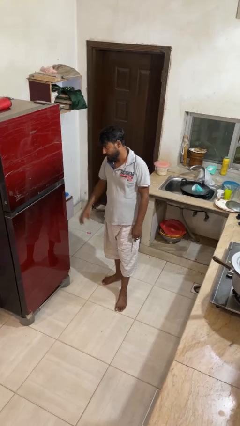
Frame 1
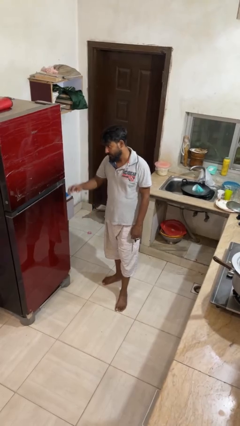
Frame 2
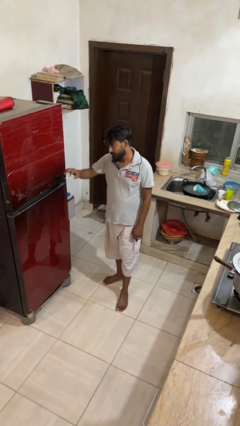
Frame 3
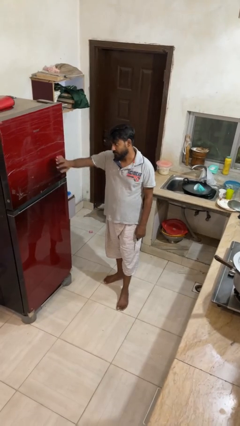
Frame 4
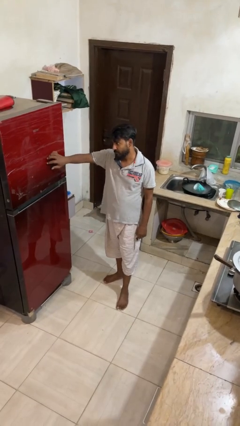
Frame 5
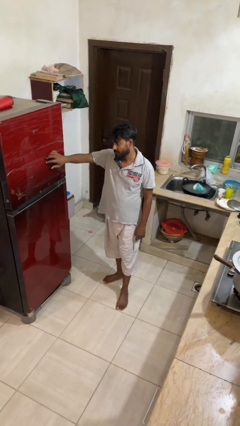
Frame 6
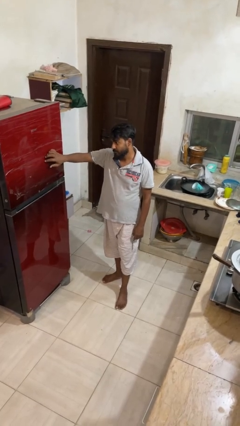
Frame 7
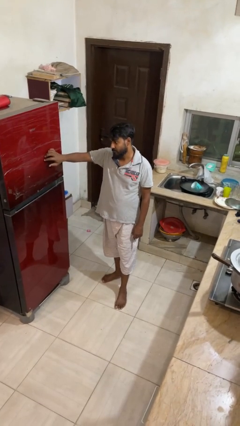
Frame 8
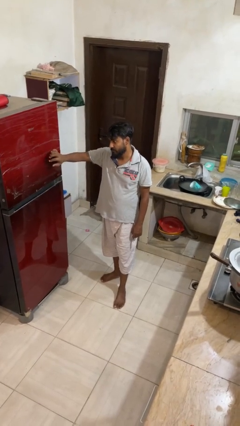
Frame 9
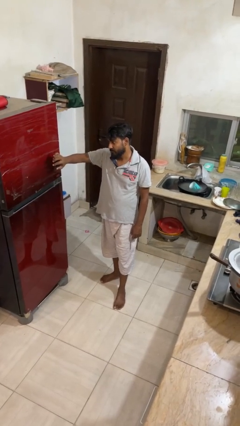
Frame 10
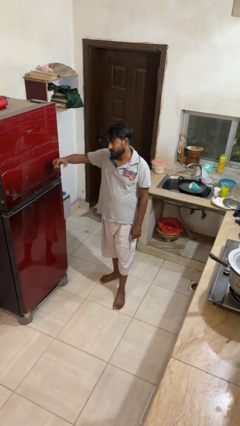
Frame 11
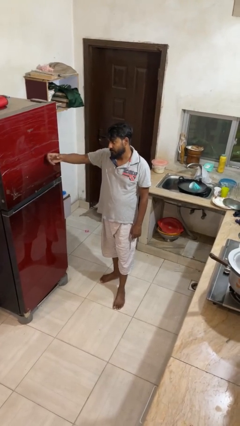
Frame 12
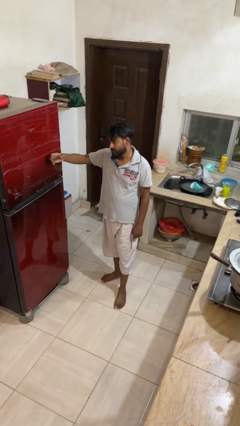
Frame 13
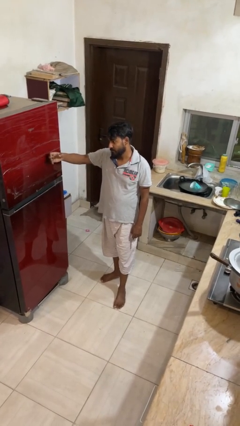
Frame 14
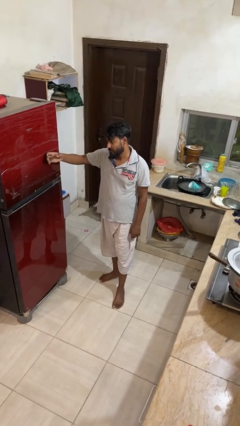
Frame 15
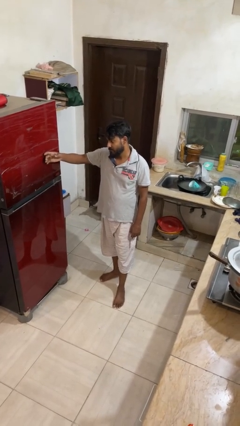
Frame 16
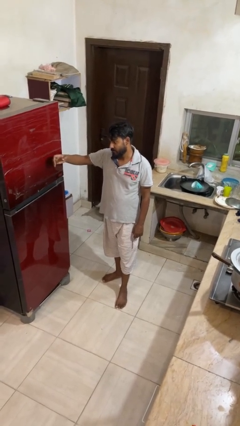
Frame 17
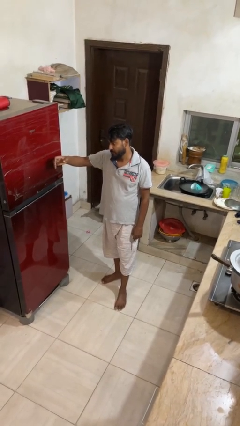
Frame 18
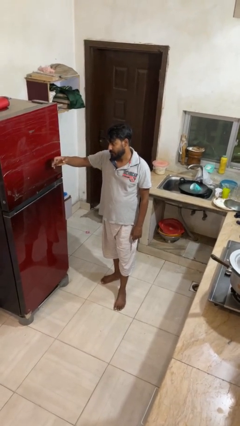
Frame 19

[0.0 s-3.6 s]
person taps object with finger

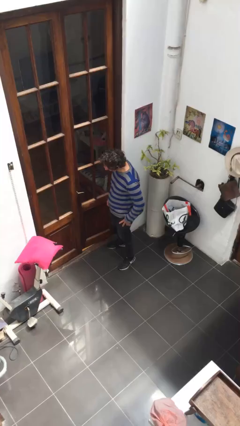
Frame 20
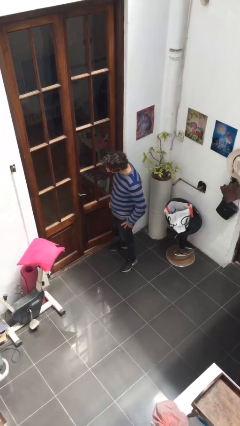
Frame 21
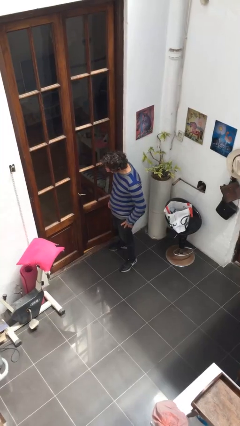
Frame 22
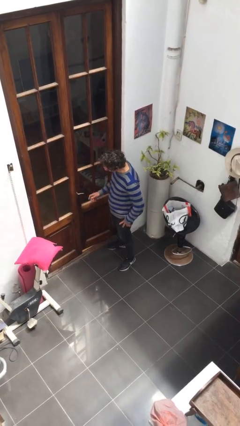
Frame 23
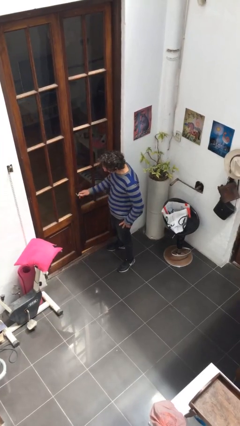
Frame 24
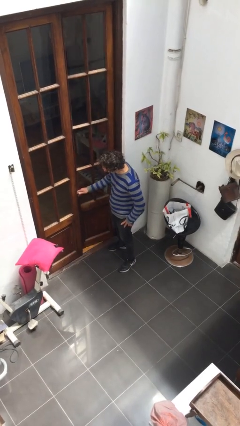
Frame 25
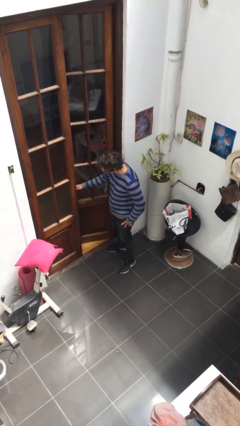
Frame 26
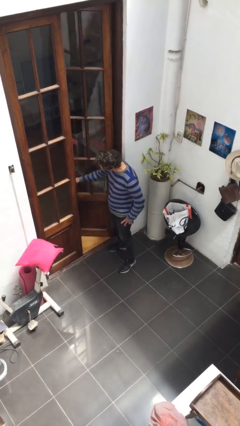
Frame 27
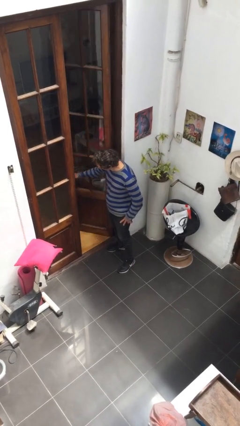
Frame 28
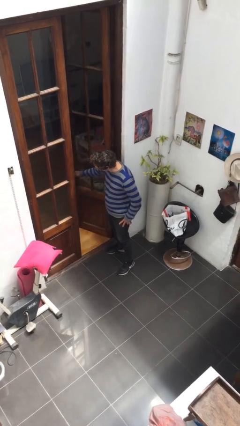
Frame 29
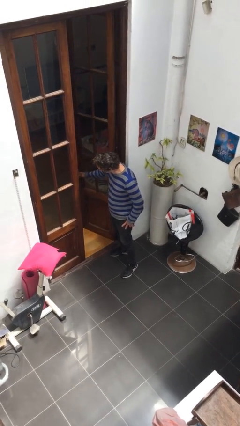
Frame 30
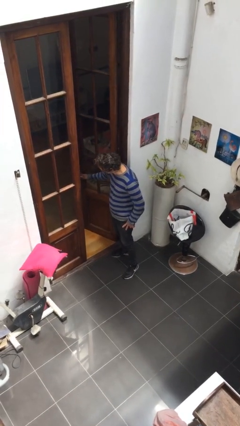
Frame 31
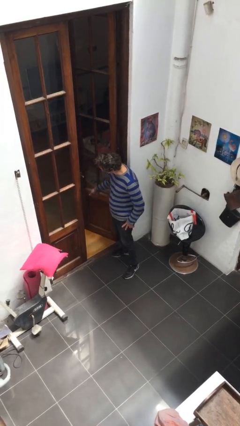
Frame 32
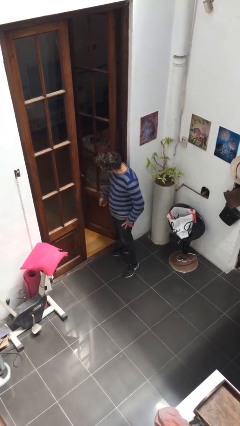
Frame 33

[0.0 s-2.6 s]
person opens facility door

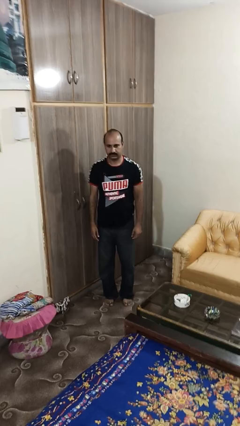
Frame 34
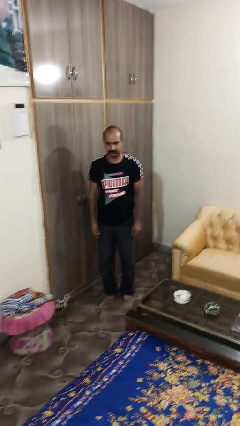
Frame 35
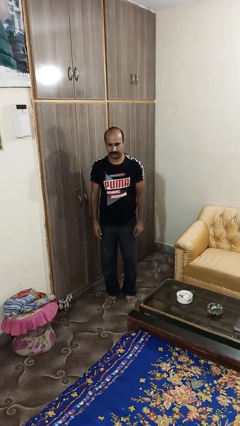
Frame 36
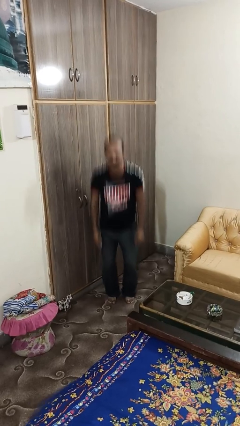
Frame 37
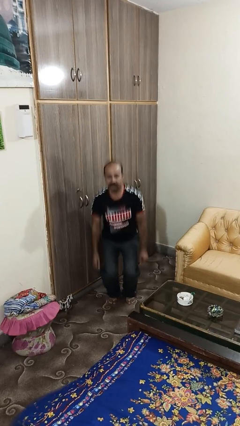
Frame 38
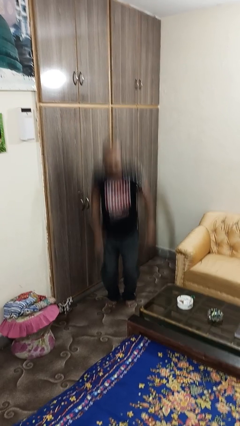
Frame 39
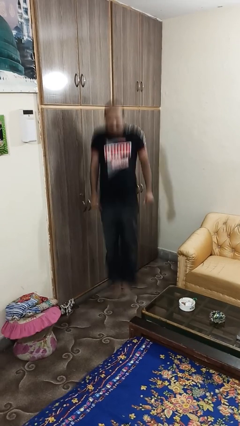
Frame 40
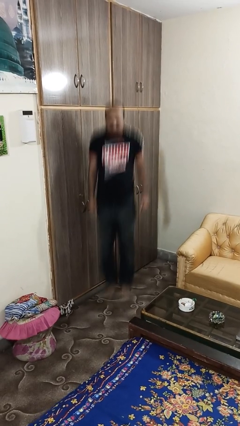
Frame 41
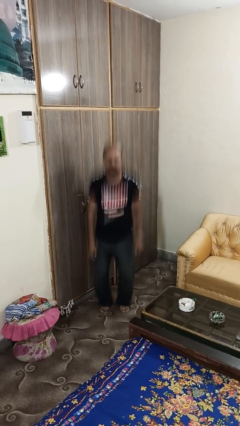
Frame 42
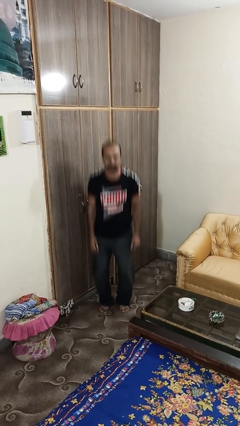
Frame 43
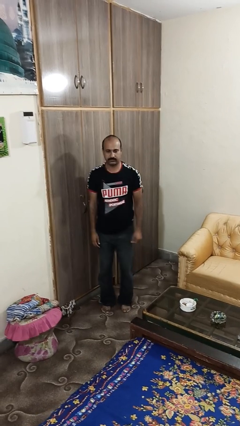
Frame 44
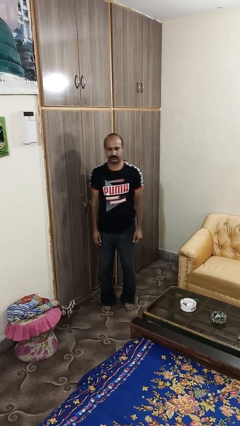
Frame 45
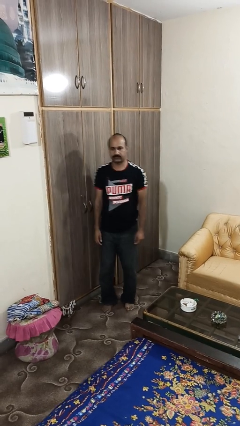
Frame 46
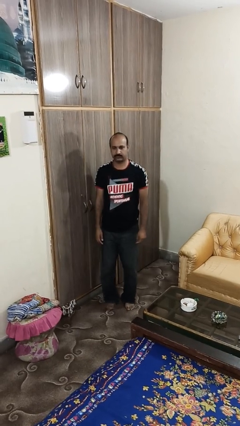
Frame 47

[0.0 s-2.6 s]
person jumps

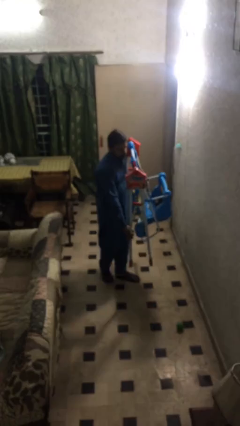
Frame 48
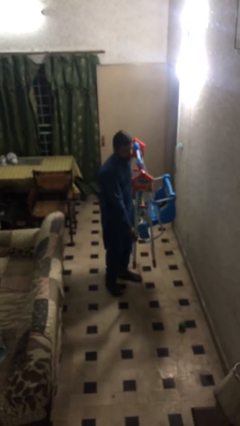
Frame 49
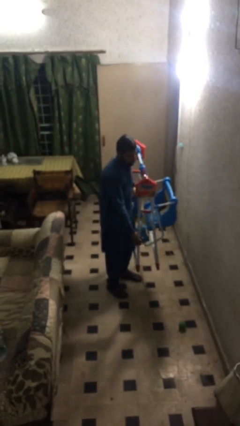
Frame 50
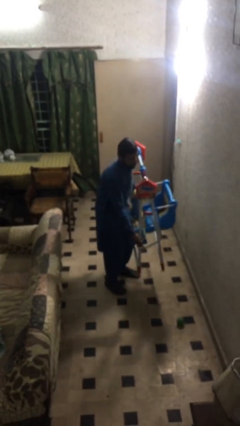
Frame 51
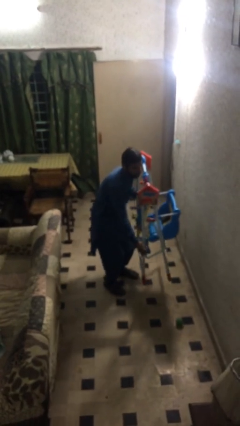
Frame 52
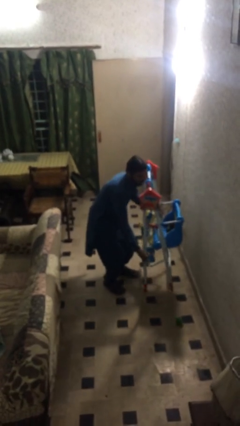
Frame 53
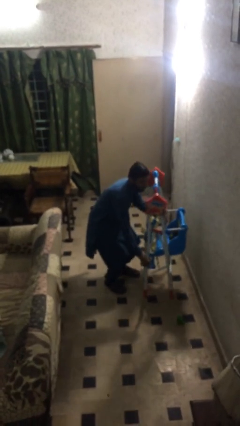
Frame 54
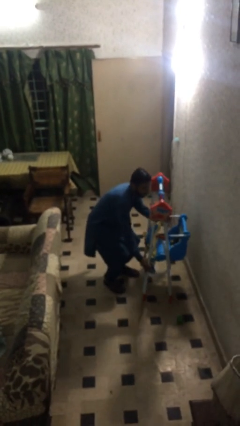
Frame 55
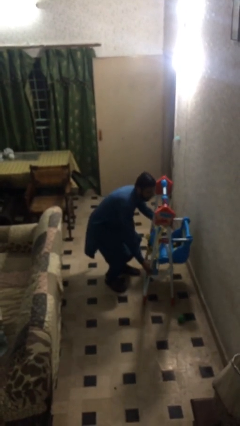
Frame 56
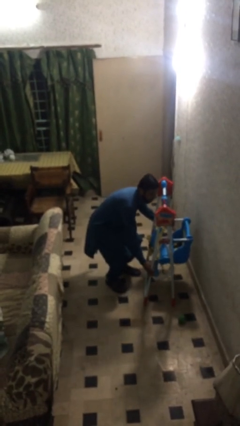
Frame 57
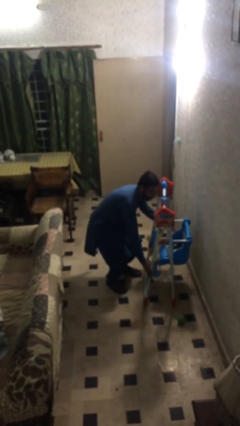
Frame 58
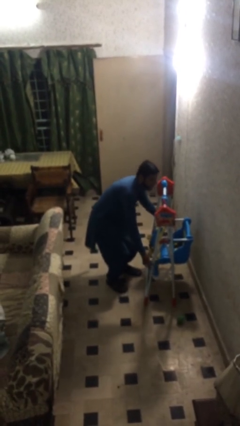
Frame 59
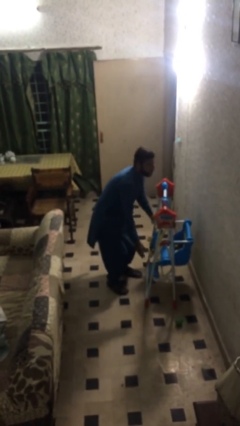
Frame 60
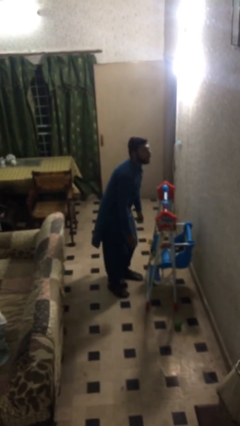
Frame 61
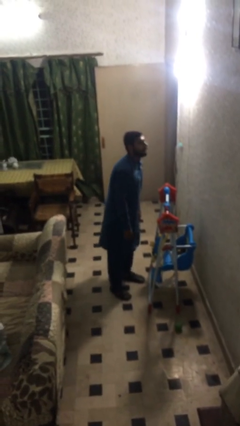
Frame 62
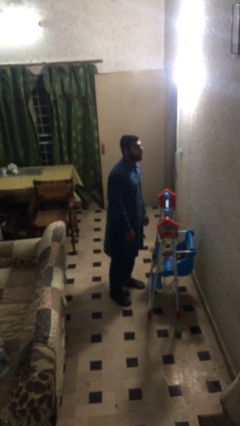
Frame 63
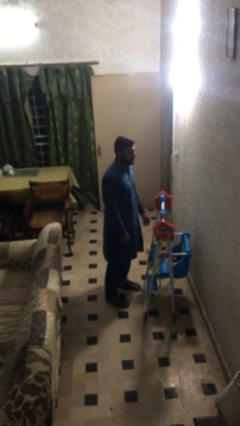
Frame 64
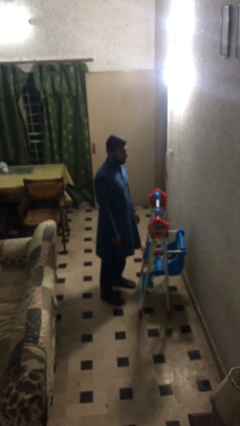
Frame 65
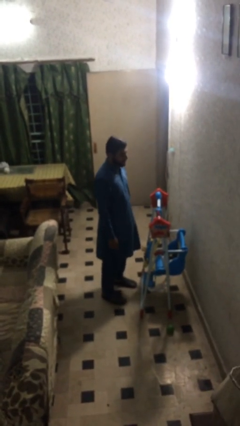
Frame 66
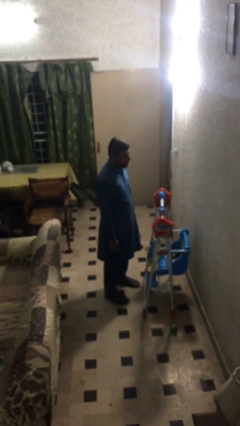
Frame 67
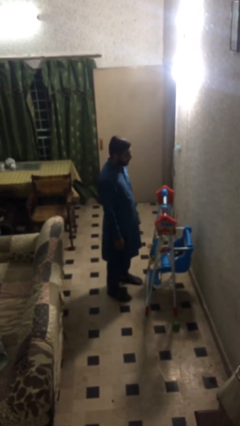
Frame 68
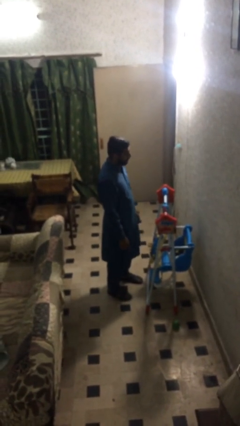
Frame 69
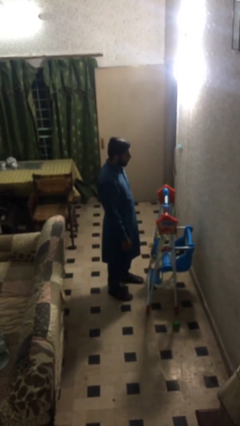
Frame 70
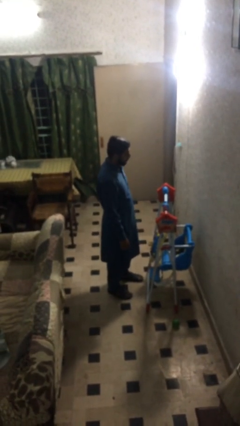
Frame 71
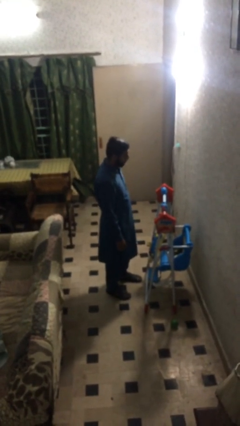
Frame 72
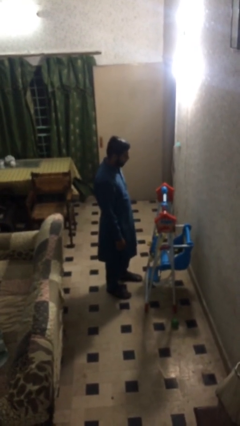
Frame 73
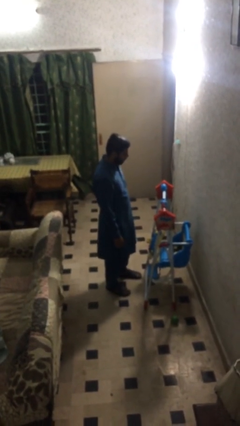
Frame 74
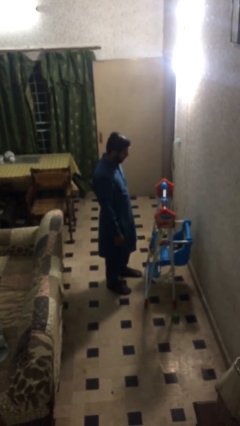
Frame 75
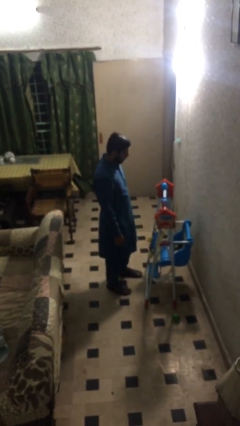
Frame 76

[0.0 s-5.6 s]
person puts down object on floor

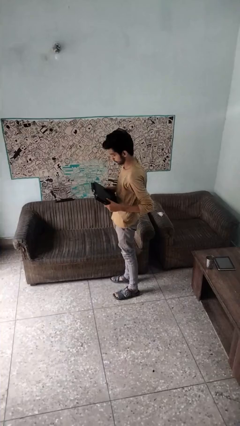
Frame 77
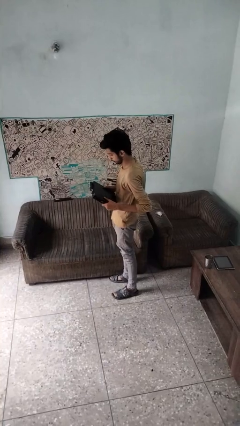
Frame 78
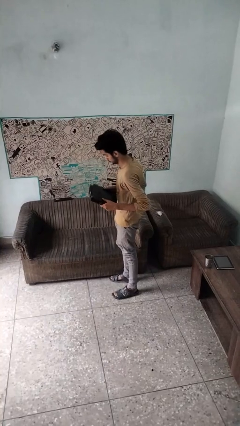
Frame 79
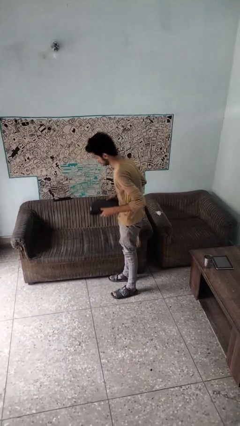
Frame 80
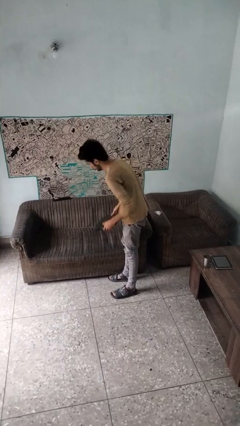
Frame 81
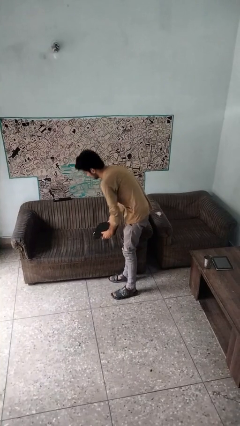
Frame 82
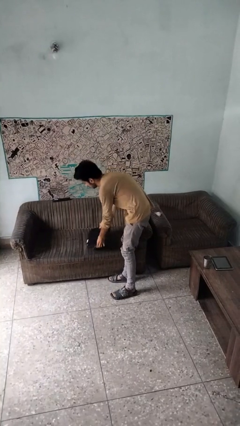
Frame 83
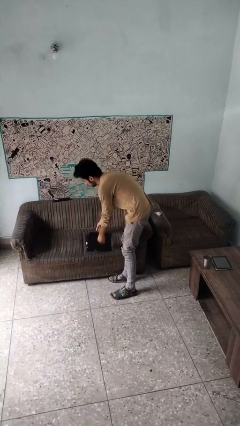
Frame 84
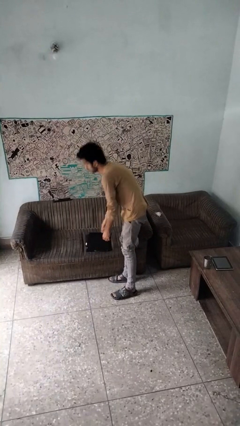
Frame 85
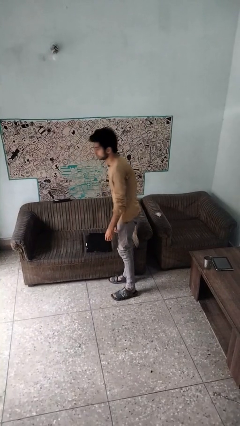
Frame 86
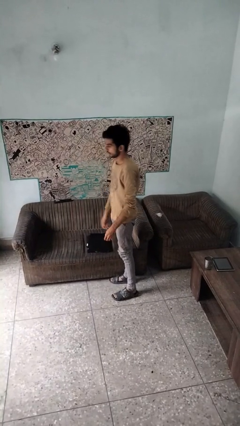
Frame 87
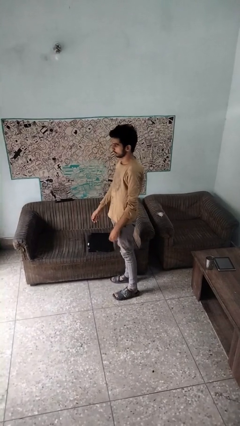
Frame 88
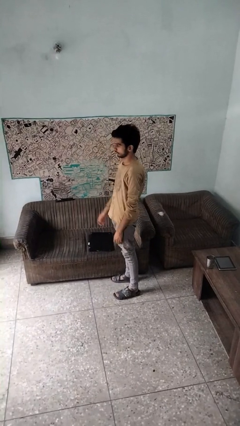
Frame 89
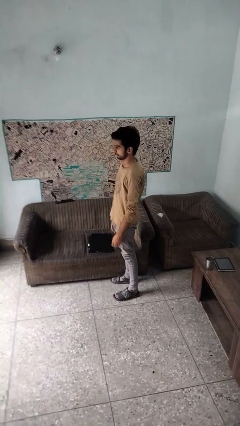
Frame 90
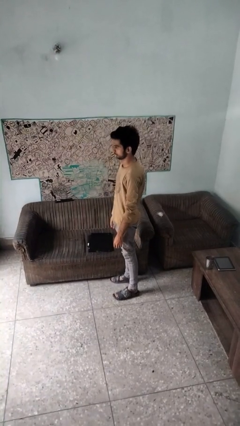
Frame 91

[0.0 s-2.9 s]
person puts down object on couch

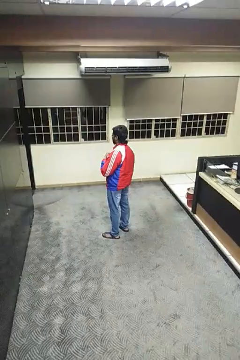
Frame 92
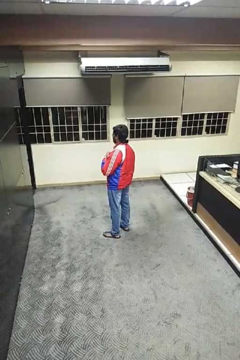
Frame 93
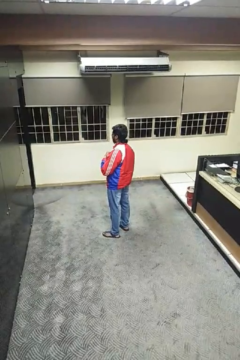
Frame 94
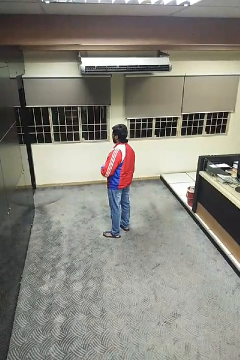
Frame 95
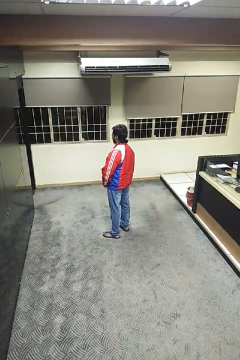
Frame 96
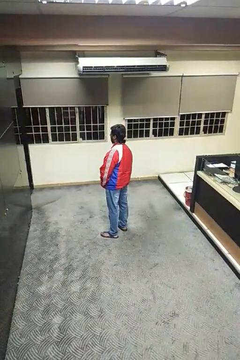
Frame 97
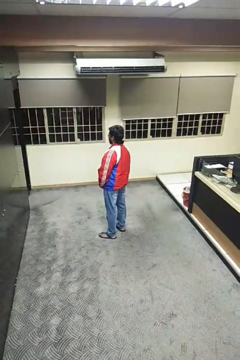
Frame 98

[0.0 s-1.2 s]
person unzips jacket
